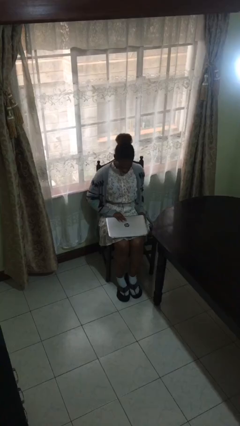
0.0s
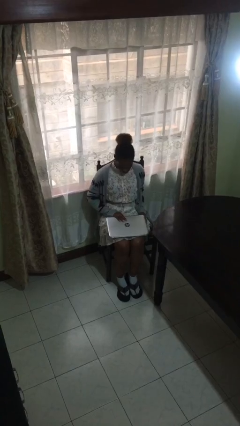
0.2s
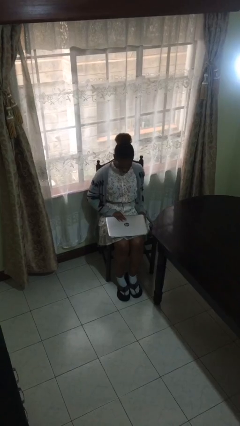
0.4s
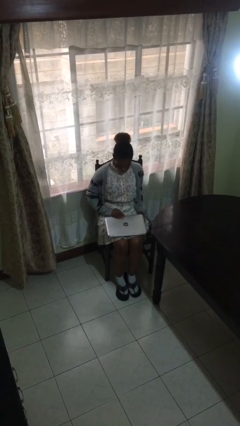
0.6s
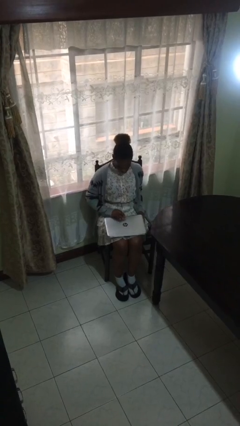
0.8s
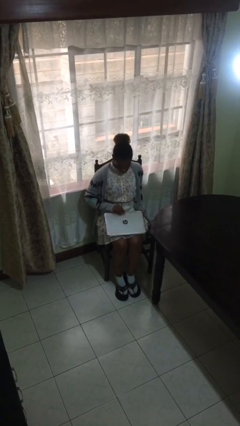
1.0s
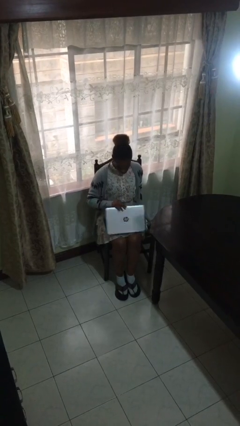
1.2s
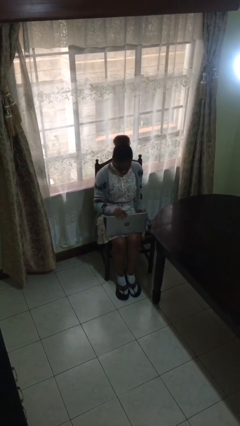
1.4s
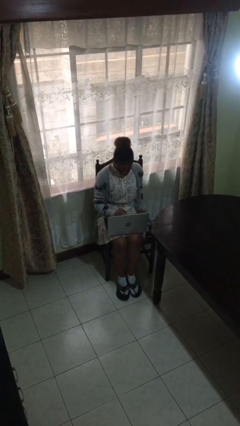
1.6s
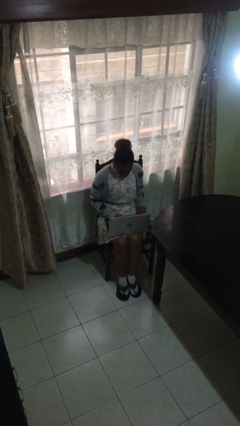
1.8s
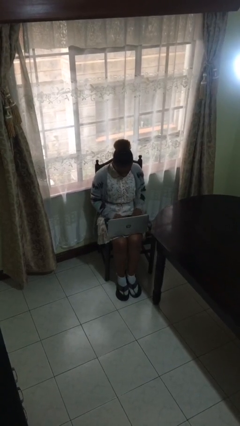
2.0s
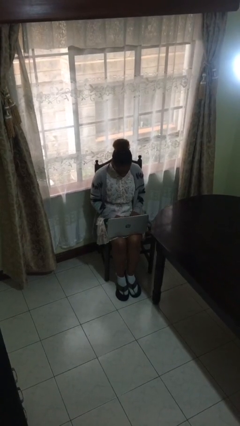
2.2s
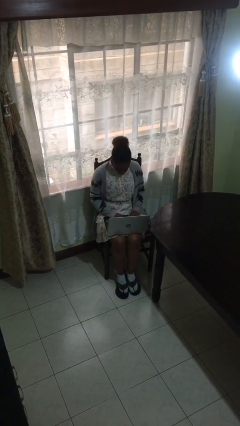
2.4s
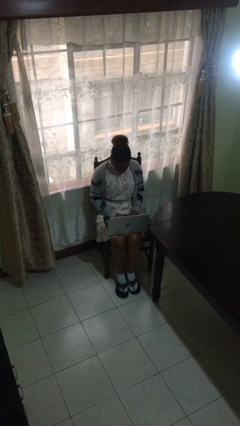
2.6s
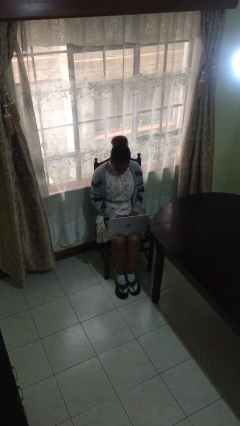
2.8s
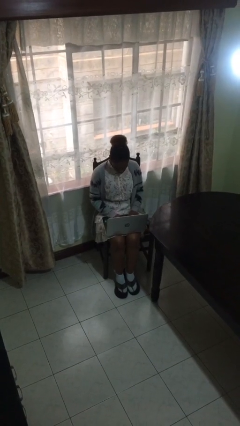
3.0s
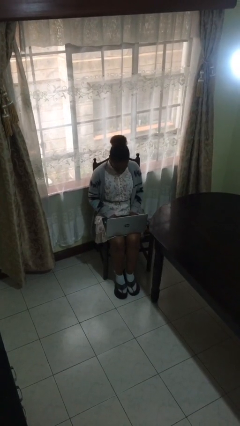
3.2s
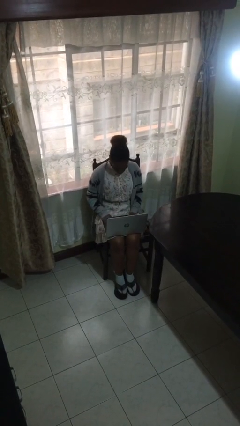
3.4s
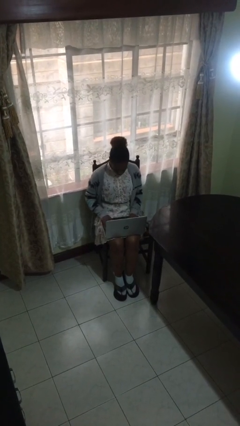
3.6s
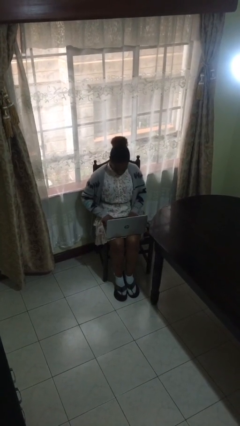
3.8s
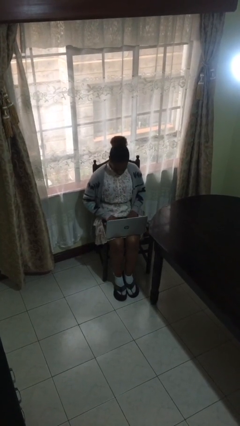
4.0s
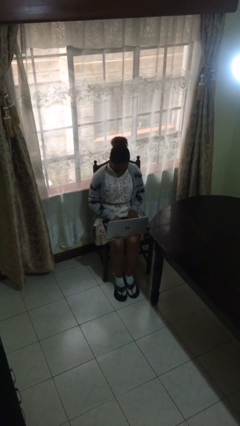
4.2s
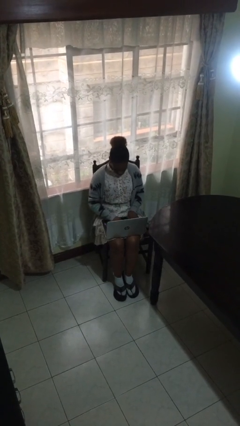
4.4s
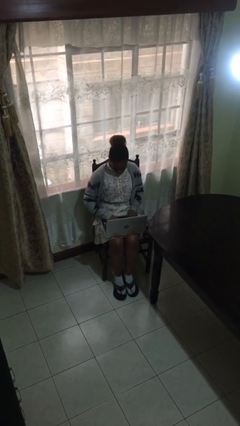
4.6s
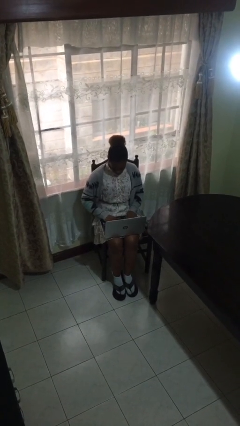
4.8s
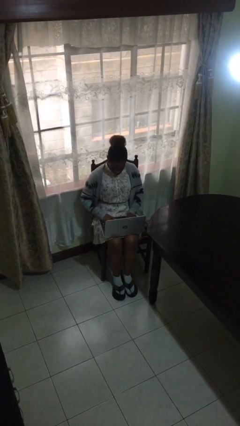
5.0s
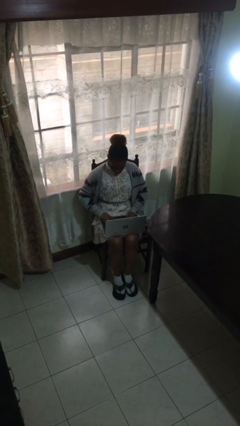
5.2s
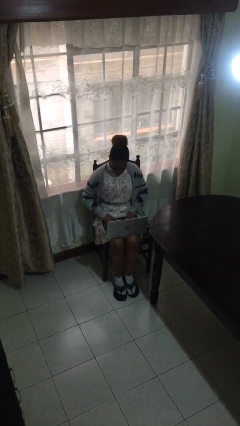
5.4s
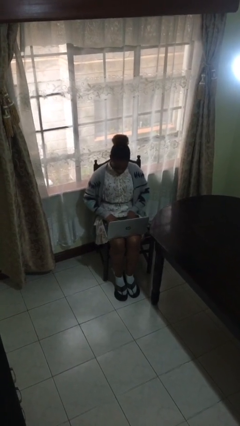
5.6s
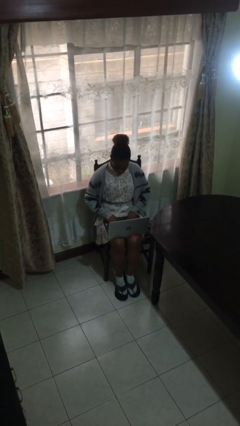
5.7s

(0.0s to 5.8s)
person interacts with laptop

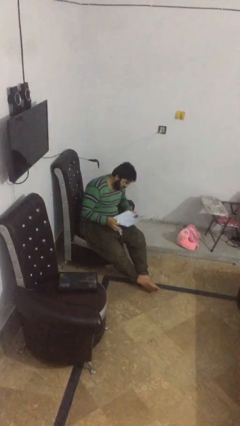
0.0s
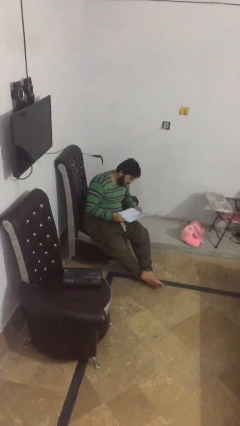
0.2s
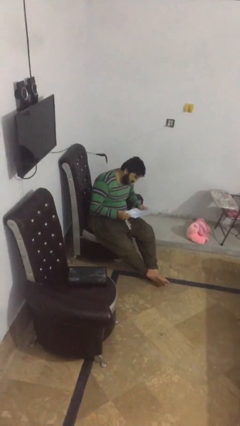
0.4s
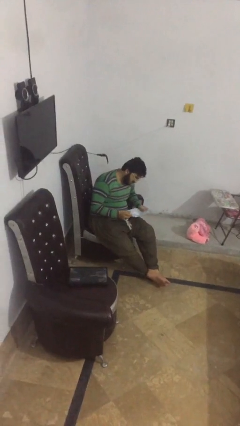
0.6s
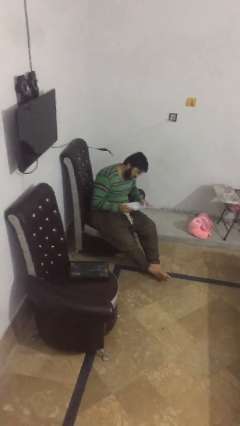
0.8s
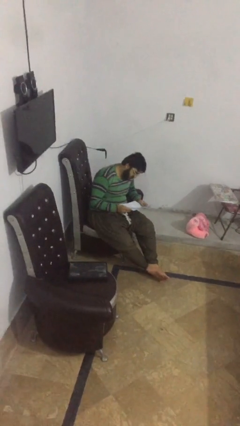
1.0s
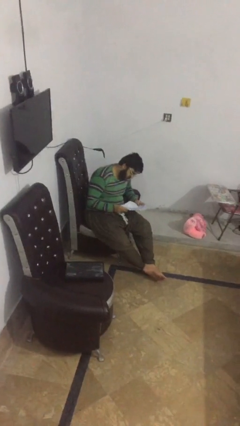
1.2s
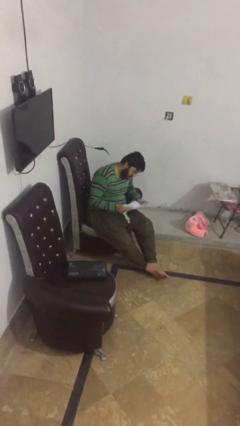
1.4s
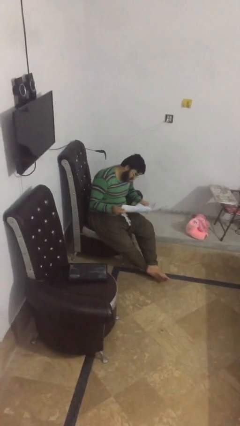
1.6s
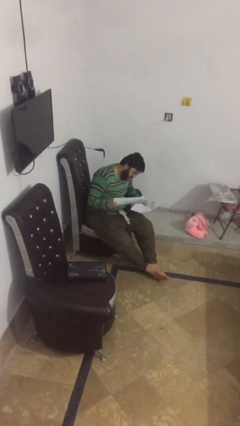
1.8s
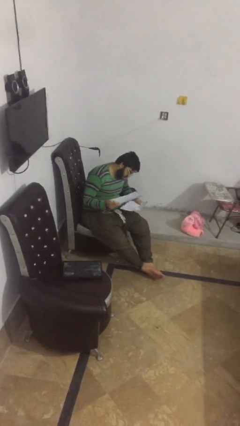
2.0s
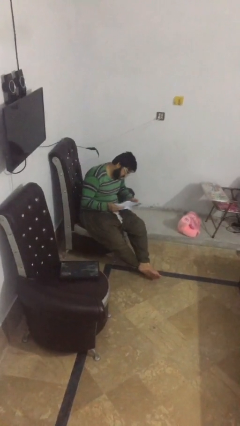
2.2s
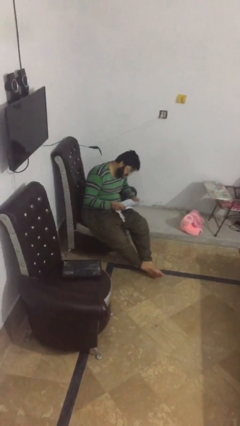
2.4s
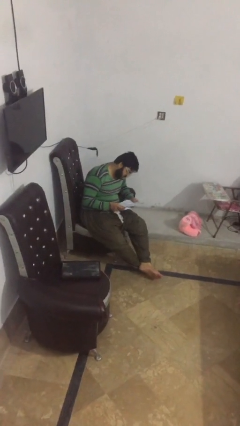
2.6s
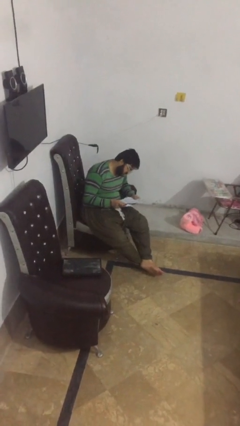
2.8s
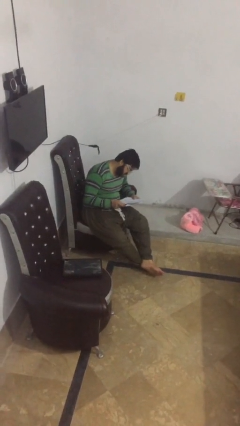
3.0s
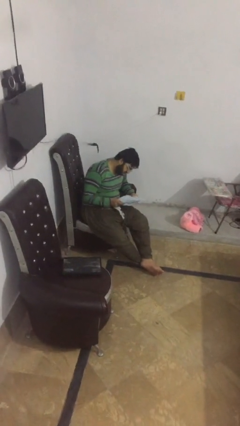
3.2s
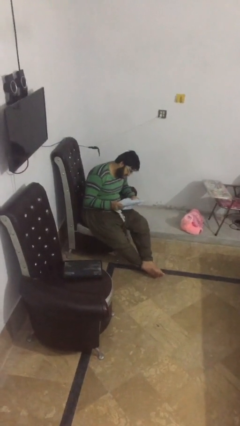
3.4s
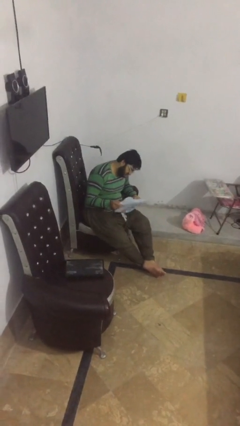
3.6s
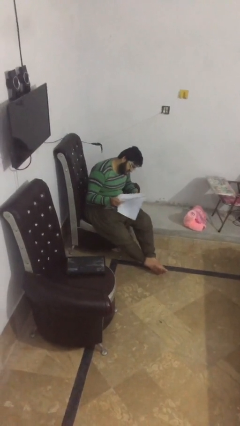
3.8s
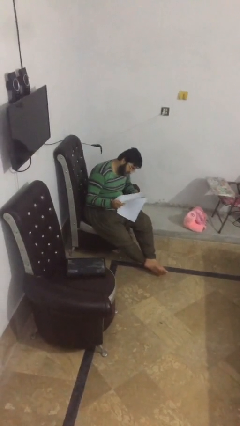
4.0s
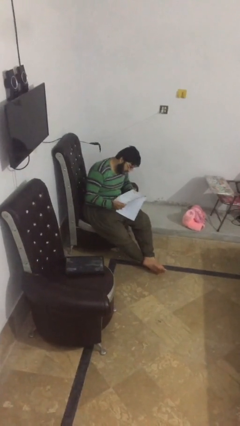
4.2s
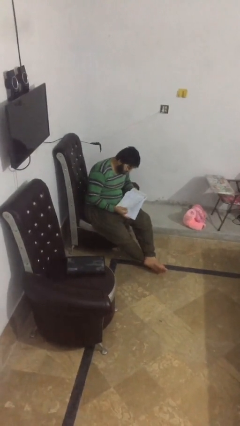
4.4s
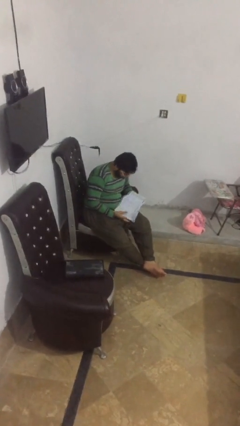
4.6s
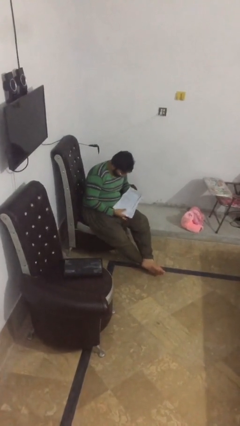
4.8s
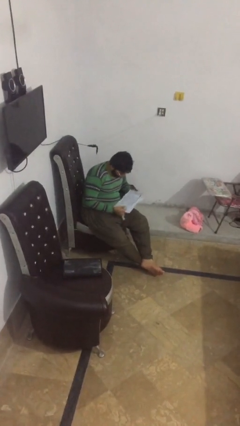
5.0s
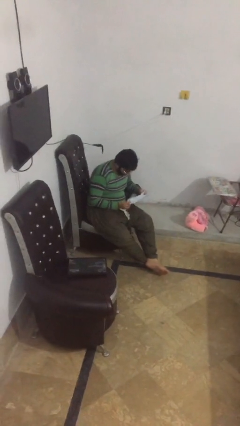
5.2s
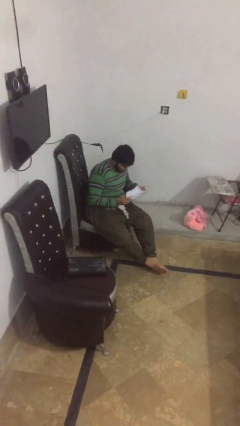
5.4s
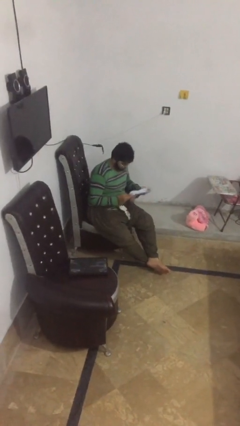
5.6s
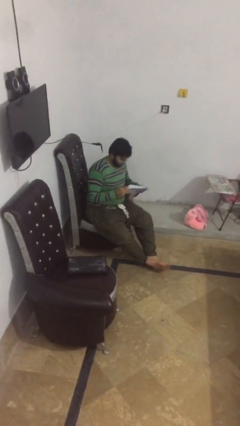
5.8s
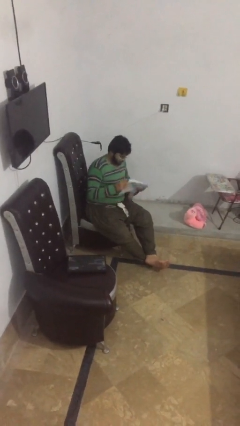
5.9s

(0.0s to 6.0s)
person reads document

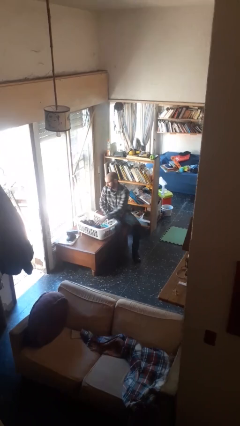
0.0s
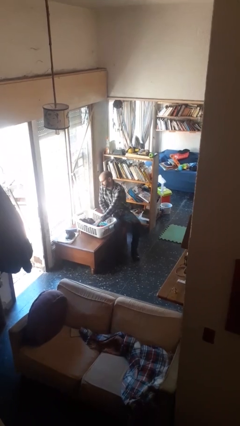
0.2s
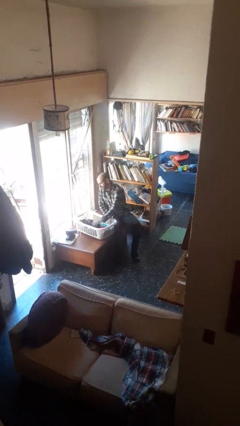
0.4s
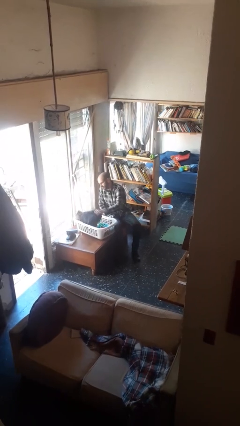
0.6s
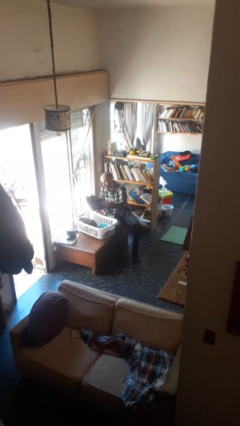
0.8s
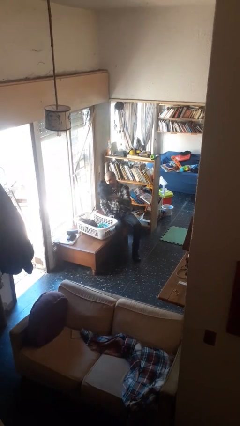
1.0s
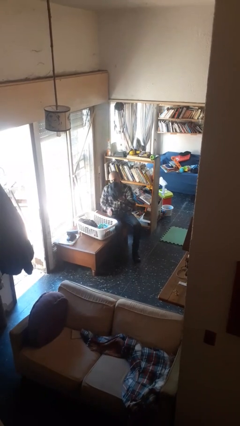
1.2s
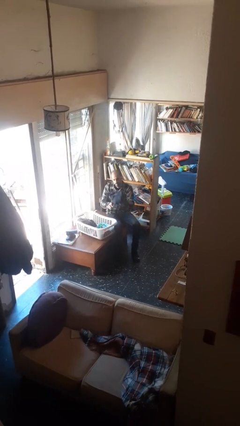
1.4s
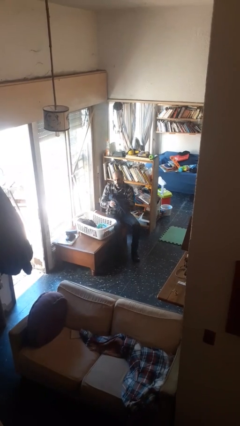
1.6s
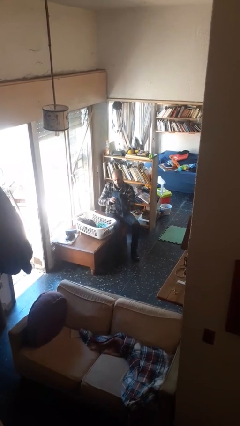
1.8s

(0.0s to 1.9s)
person takes object from basket

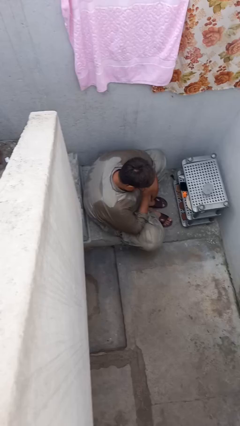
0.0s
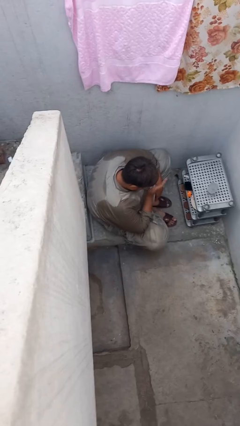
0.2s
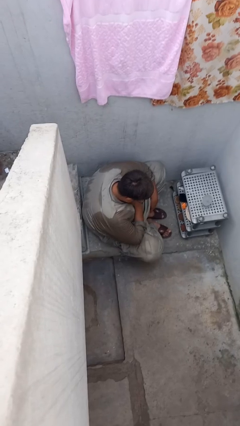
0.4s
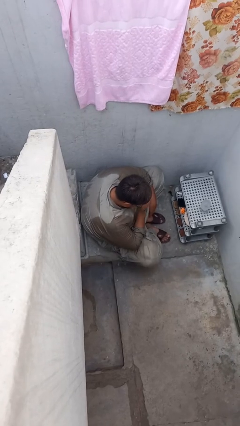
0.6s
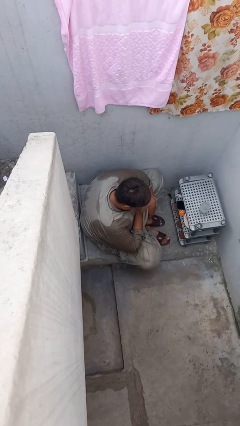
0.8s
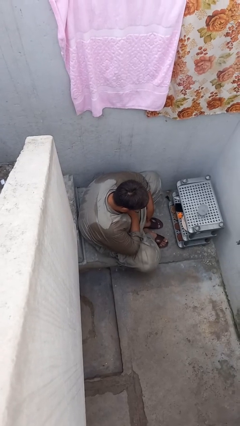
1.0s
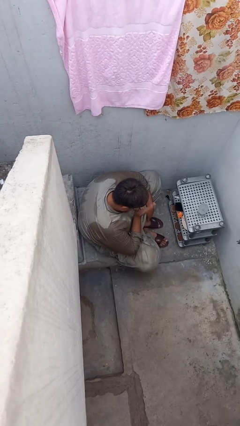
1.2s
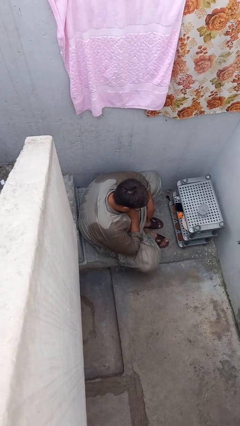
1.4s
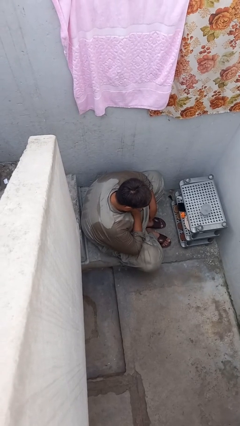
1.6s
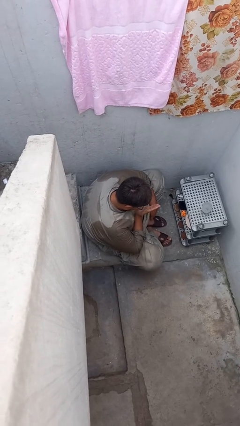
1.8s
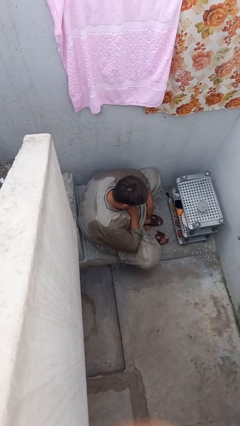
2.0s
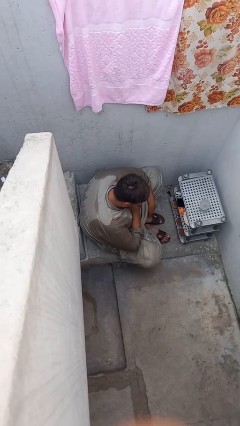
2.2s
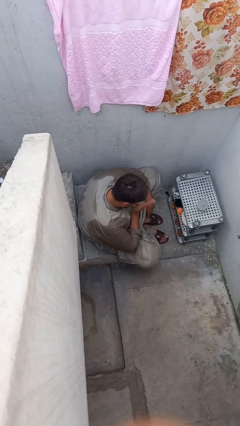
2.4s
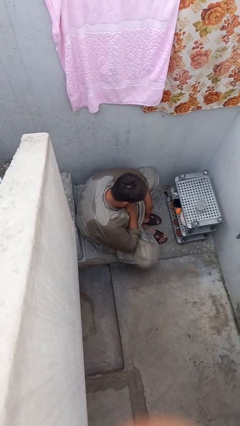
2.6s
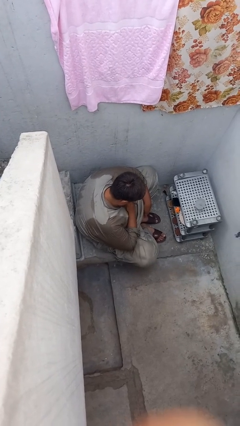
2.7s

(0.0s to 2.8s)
person drums on chest

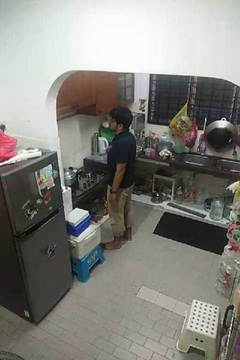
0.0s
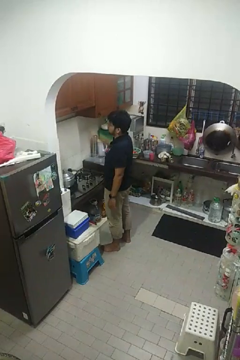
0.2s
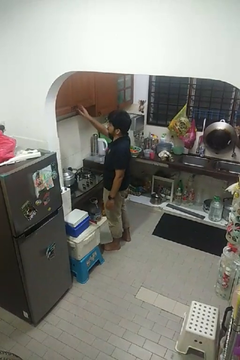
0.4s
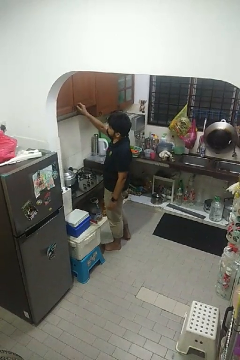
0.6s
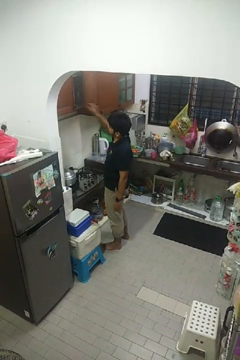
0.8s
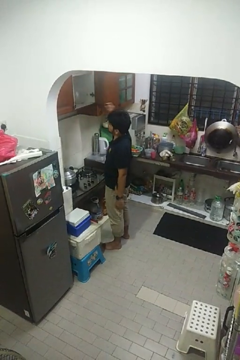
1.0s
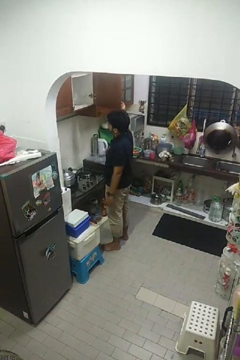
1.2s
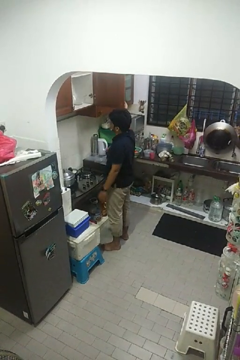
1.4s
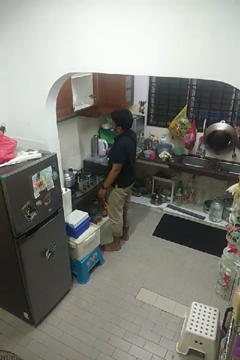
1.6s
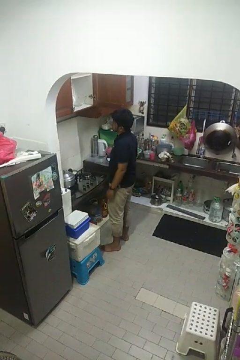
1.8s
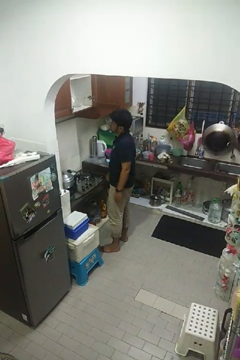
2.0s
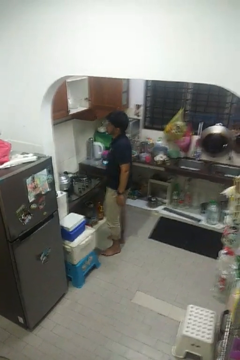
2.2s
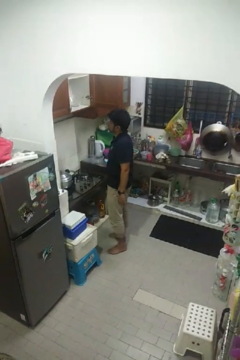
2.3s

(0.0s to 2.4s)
person opens cabinet
